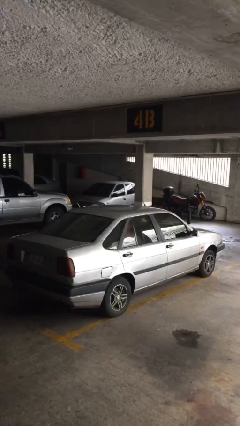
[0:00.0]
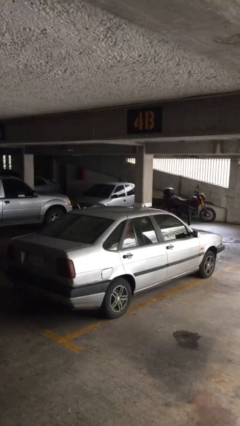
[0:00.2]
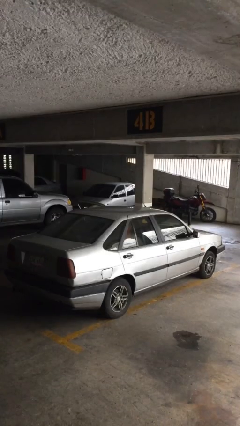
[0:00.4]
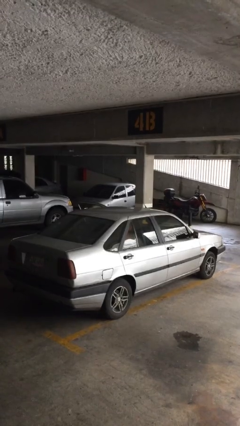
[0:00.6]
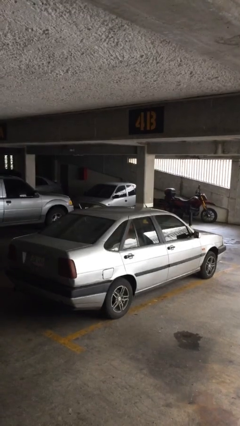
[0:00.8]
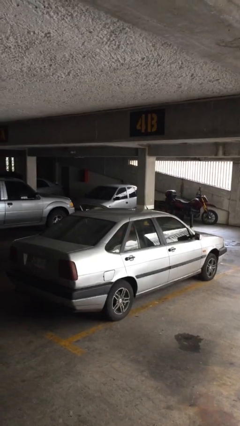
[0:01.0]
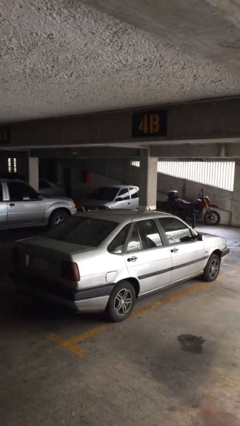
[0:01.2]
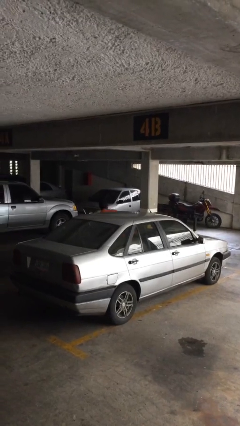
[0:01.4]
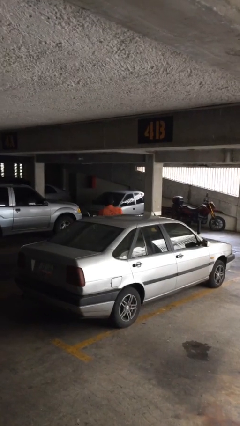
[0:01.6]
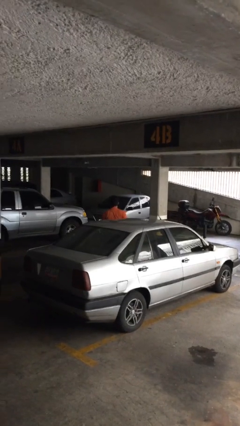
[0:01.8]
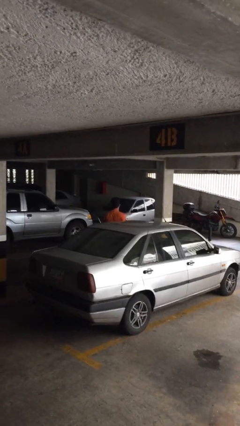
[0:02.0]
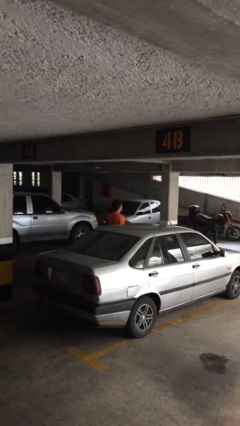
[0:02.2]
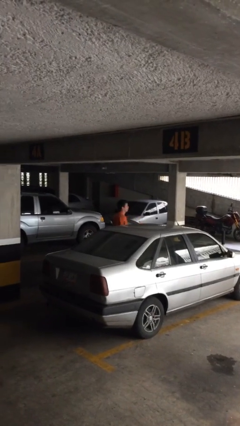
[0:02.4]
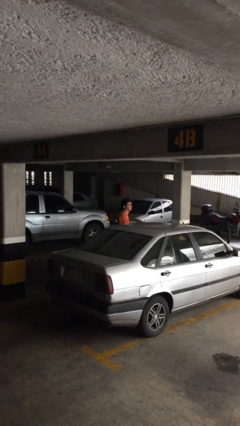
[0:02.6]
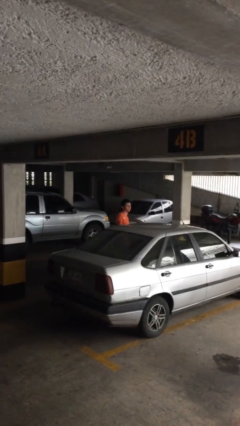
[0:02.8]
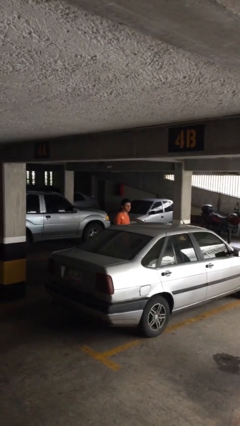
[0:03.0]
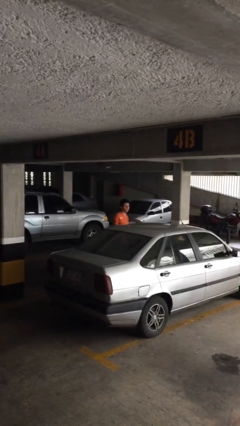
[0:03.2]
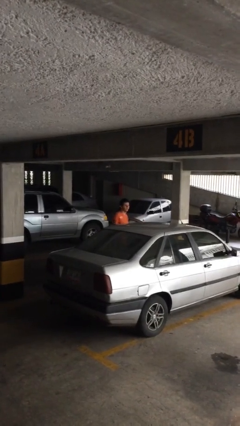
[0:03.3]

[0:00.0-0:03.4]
person exits car

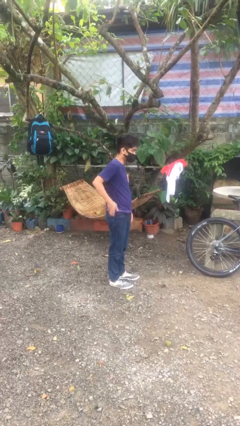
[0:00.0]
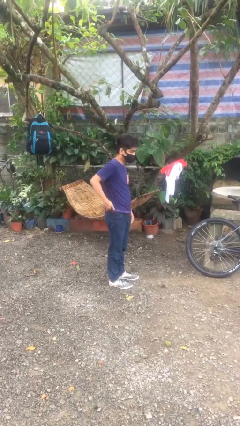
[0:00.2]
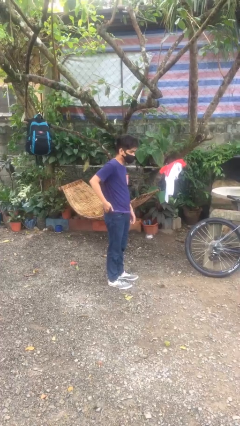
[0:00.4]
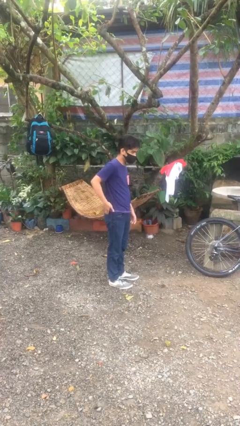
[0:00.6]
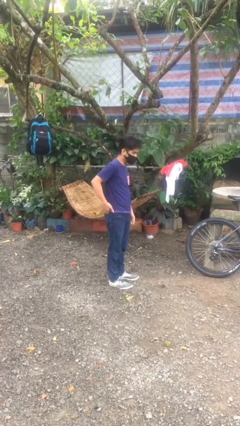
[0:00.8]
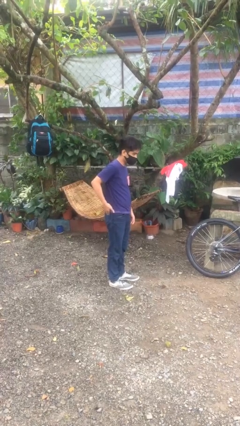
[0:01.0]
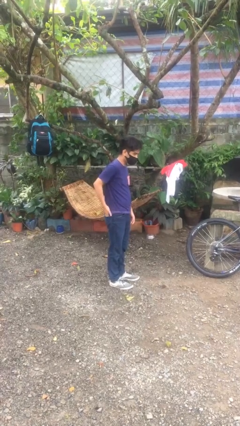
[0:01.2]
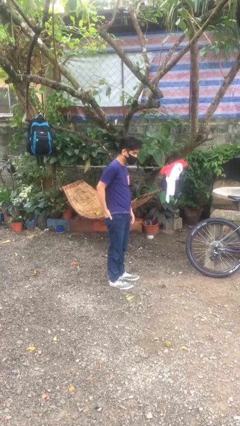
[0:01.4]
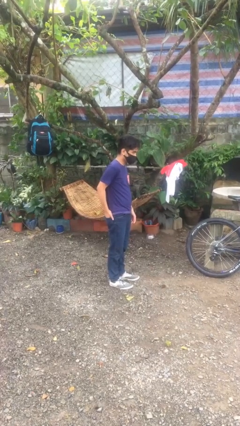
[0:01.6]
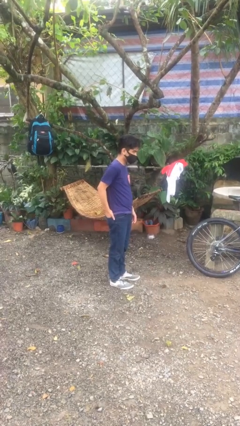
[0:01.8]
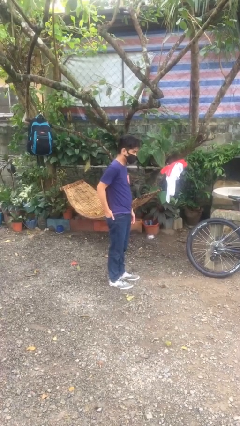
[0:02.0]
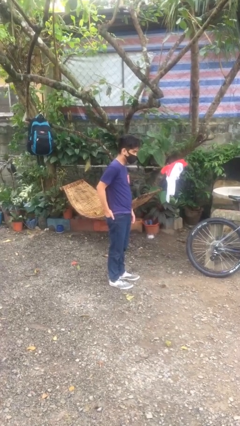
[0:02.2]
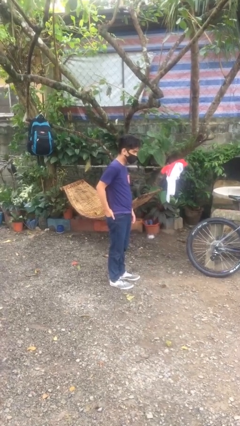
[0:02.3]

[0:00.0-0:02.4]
person puts hands in back pockets

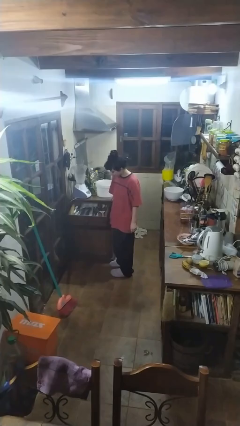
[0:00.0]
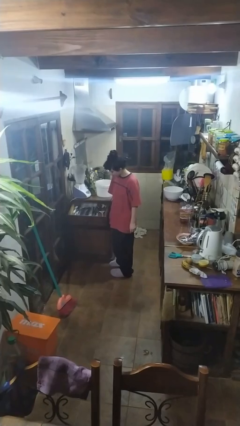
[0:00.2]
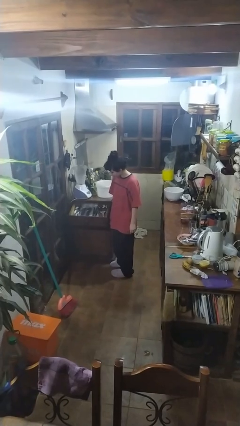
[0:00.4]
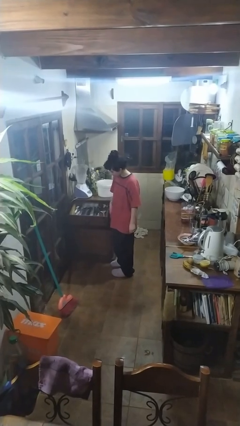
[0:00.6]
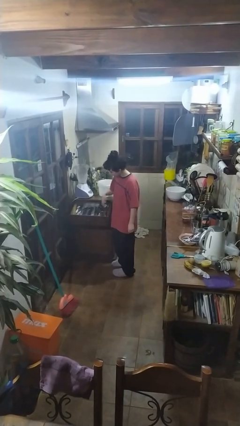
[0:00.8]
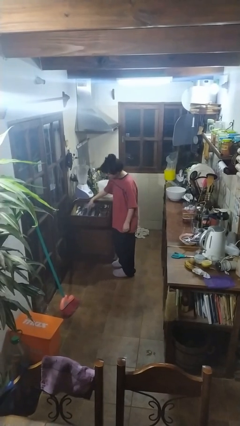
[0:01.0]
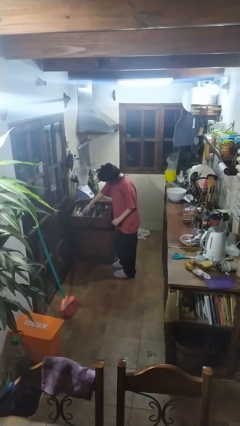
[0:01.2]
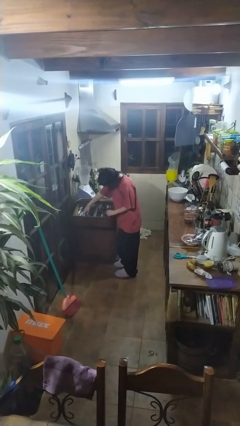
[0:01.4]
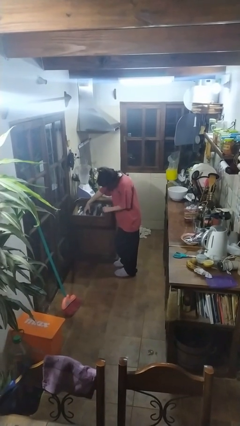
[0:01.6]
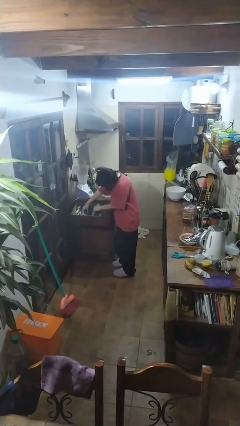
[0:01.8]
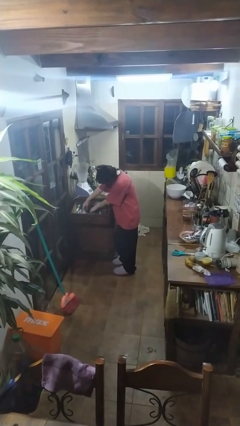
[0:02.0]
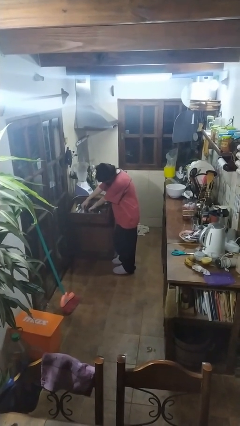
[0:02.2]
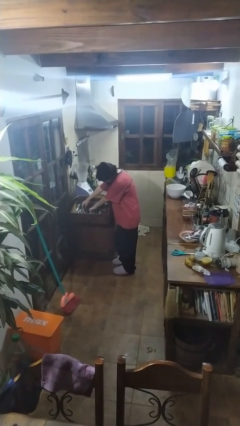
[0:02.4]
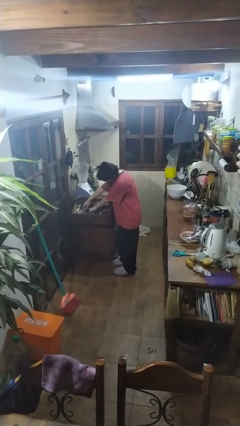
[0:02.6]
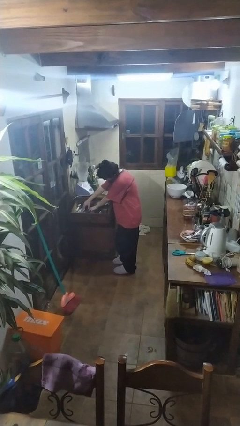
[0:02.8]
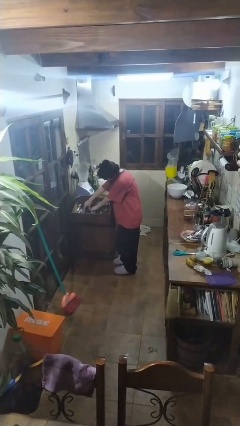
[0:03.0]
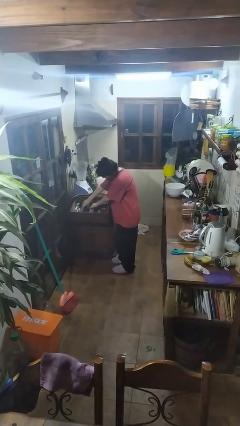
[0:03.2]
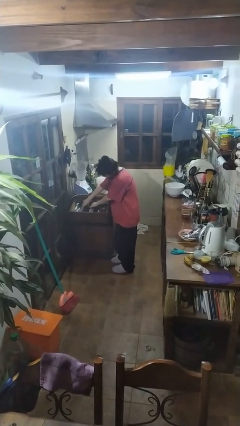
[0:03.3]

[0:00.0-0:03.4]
person searches in kitchen drawer

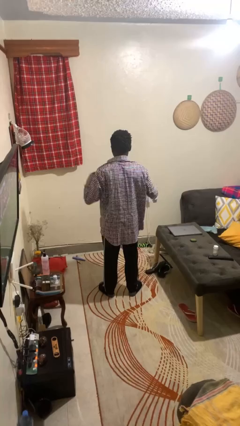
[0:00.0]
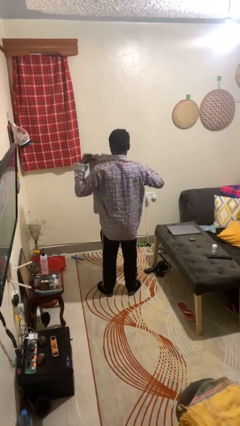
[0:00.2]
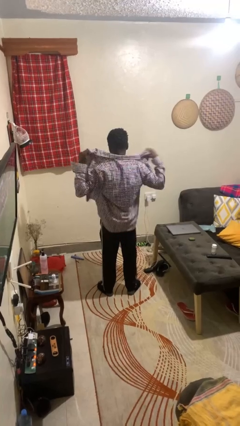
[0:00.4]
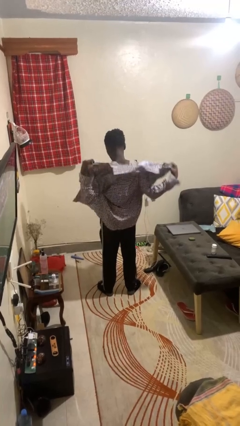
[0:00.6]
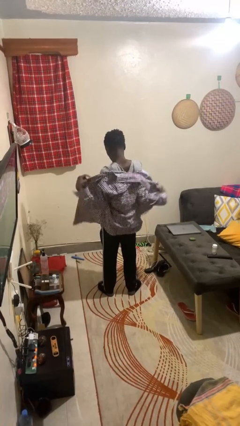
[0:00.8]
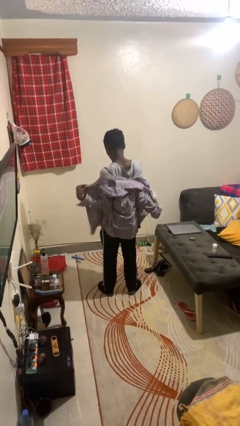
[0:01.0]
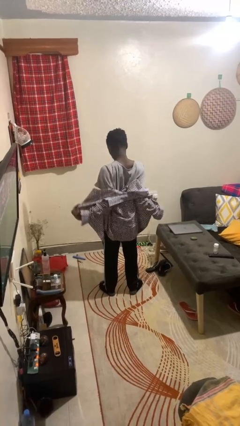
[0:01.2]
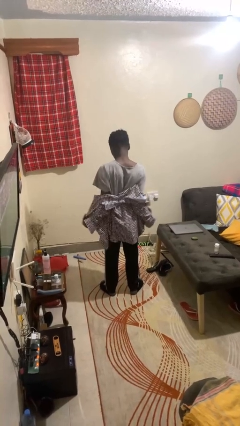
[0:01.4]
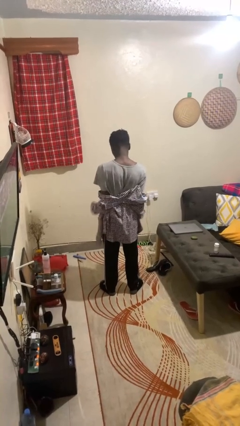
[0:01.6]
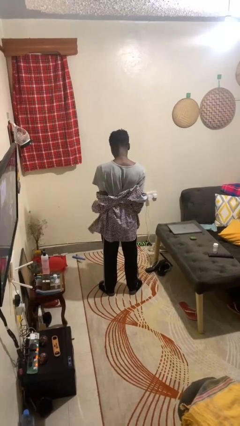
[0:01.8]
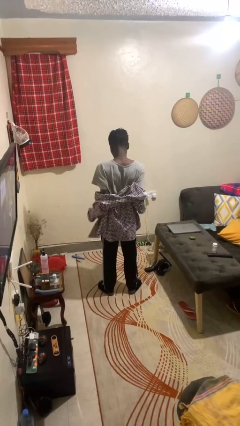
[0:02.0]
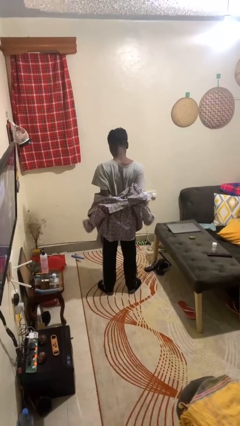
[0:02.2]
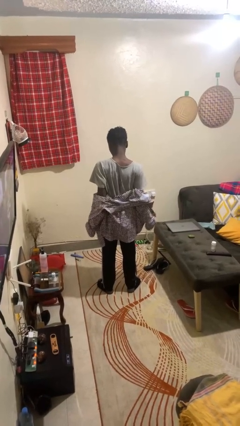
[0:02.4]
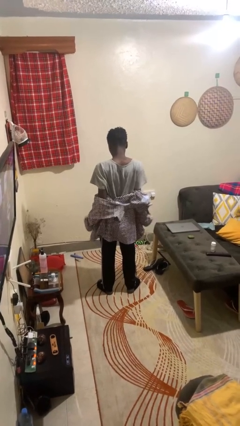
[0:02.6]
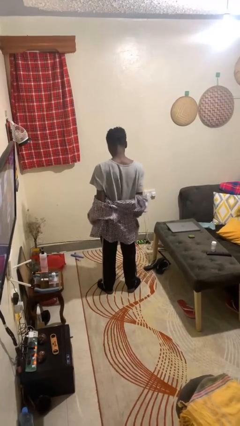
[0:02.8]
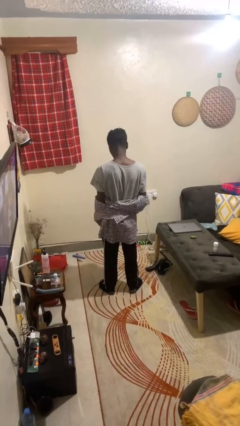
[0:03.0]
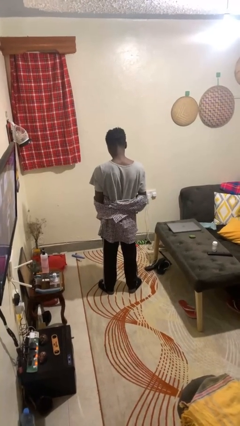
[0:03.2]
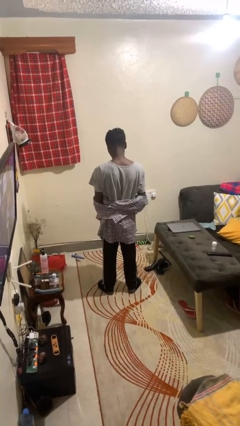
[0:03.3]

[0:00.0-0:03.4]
person takes off shirt

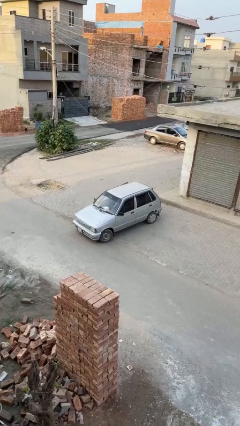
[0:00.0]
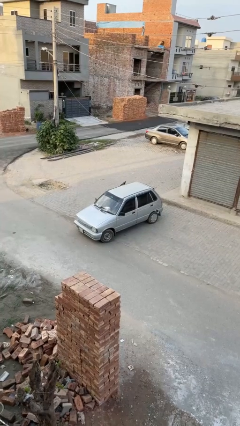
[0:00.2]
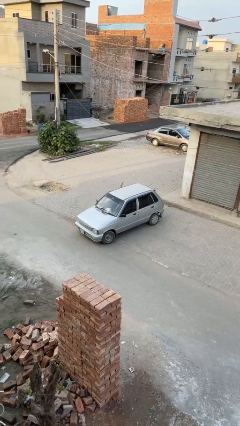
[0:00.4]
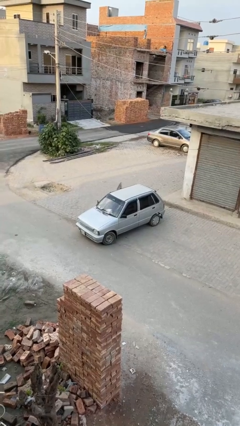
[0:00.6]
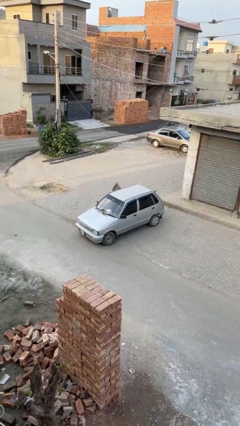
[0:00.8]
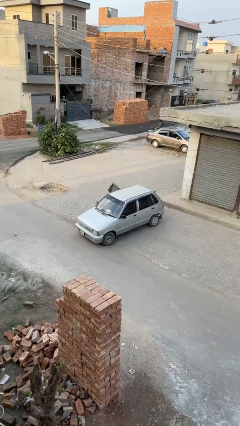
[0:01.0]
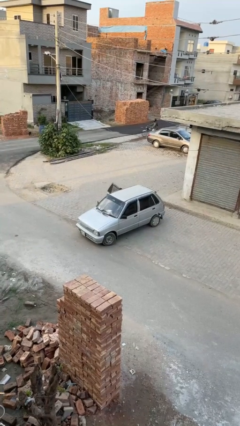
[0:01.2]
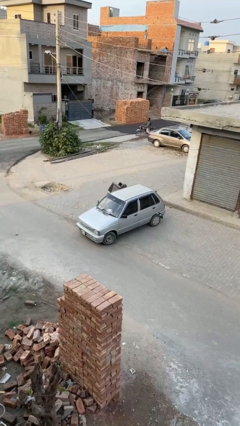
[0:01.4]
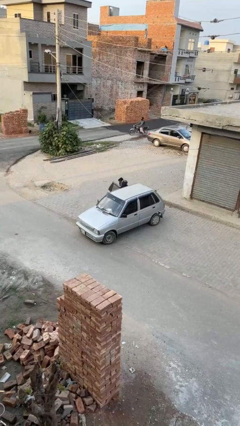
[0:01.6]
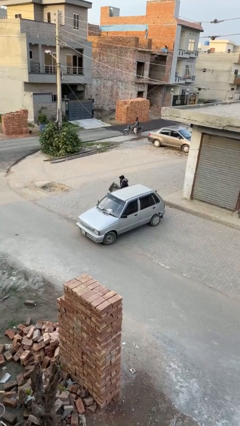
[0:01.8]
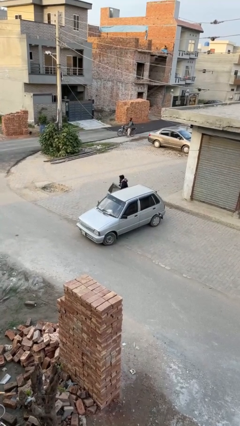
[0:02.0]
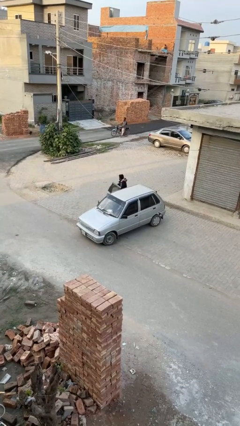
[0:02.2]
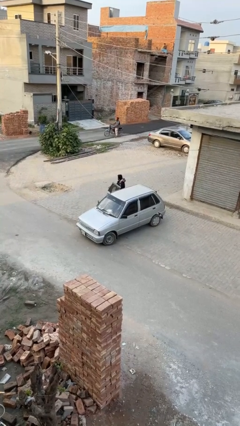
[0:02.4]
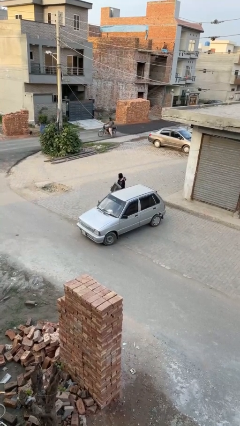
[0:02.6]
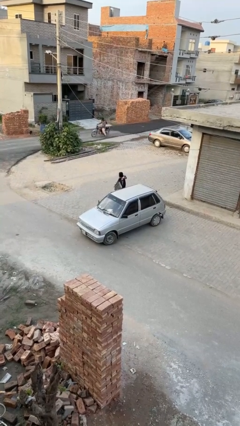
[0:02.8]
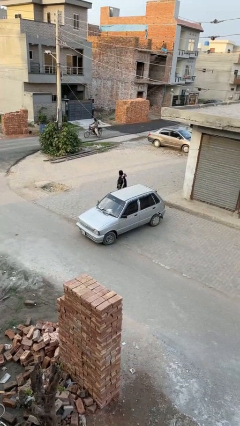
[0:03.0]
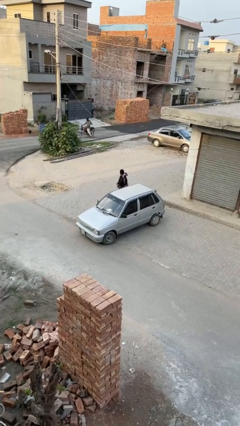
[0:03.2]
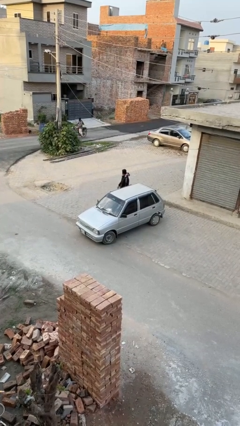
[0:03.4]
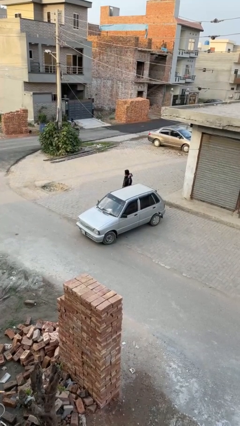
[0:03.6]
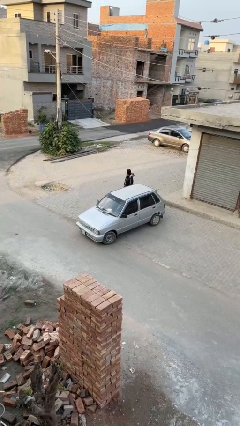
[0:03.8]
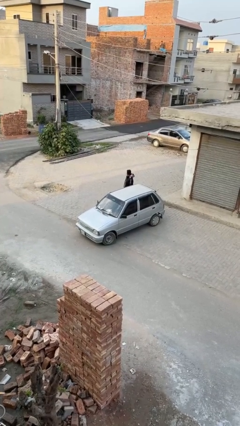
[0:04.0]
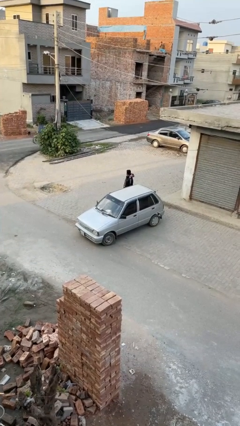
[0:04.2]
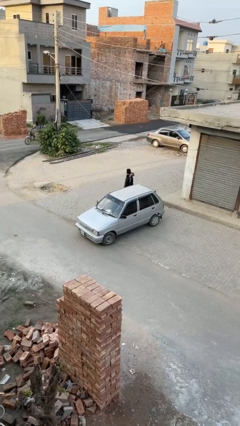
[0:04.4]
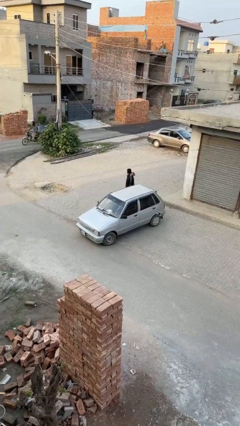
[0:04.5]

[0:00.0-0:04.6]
car drops off person

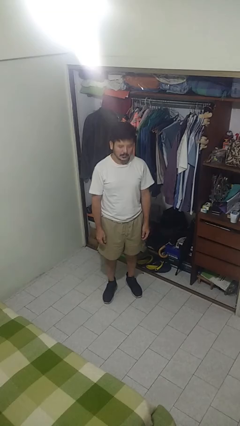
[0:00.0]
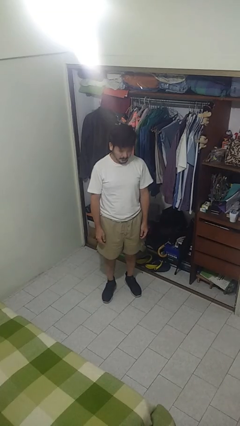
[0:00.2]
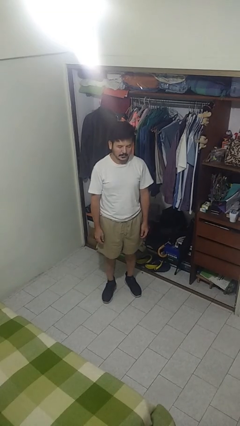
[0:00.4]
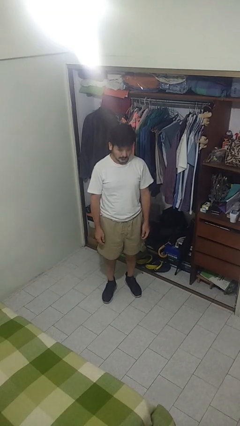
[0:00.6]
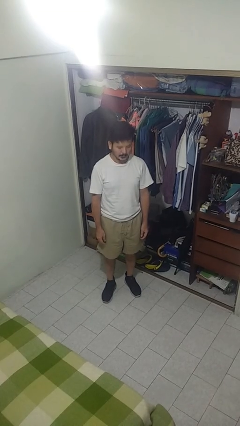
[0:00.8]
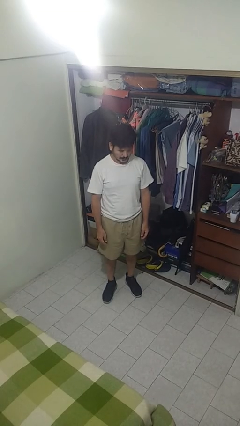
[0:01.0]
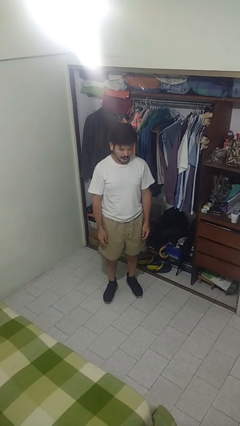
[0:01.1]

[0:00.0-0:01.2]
person nods head
